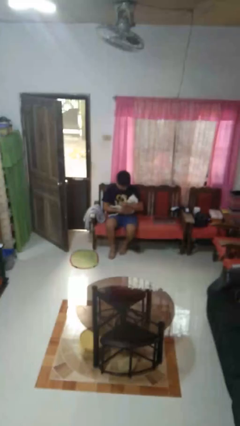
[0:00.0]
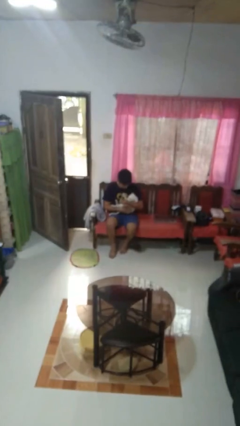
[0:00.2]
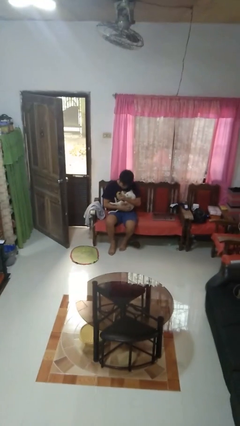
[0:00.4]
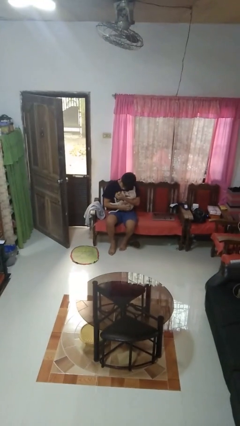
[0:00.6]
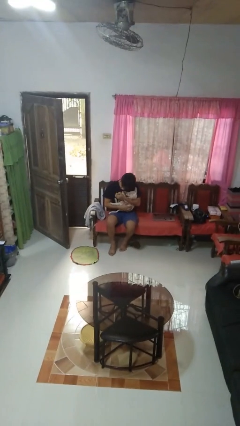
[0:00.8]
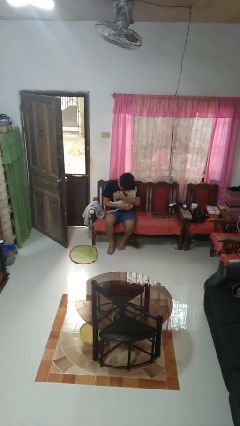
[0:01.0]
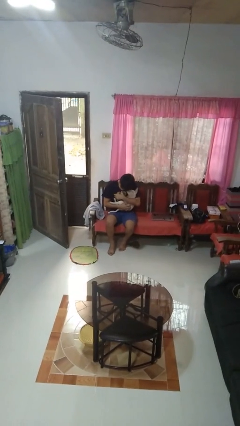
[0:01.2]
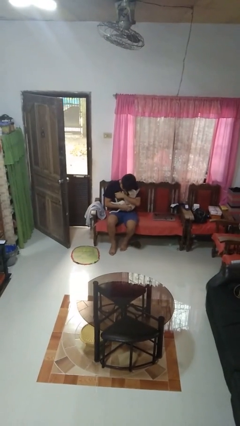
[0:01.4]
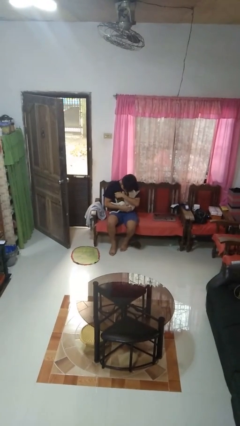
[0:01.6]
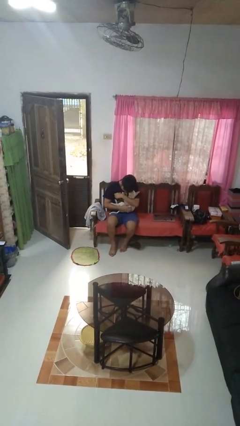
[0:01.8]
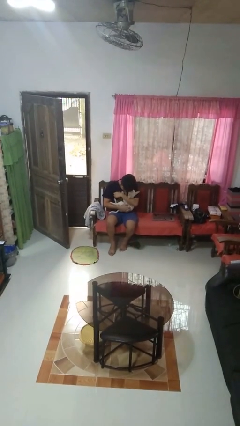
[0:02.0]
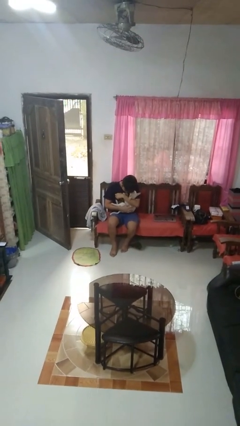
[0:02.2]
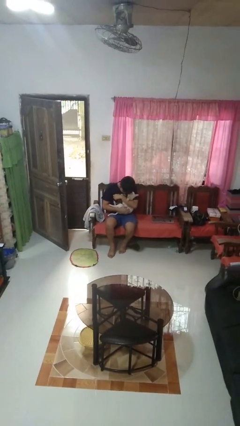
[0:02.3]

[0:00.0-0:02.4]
person hugs dog

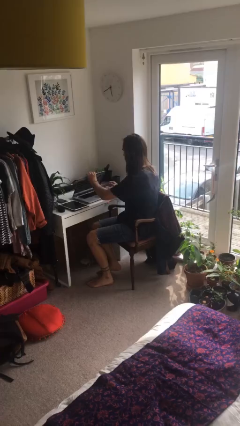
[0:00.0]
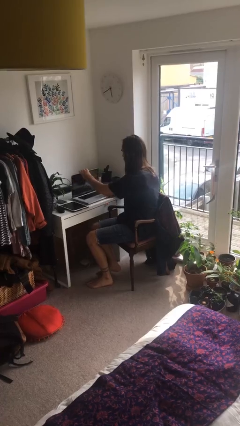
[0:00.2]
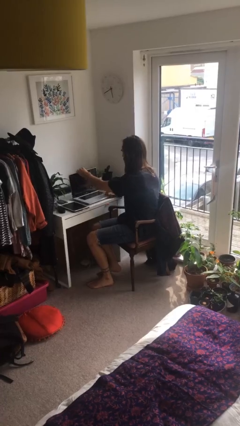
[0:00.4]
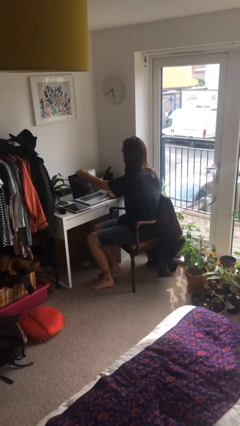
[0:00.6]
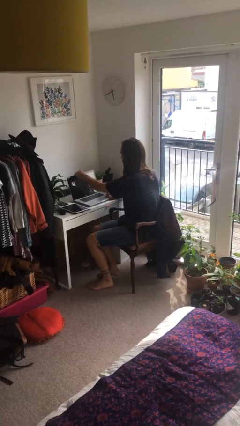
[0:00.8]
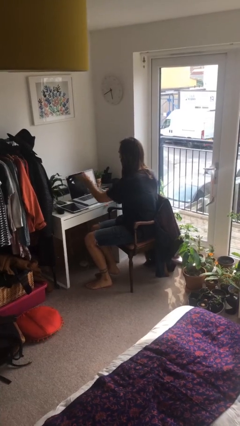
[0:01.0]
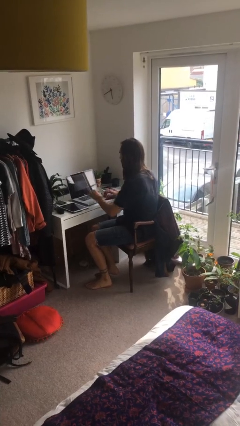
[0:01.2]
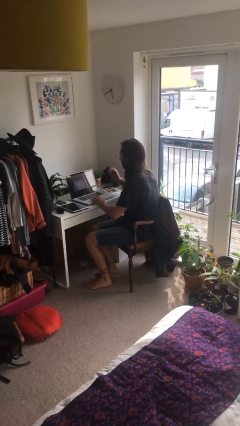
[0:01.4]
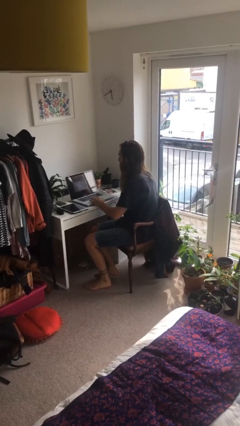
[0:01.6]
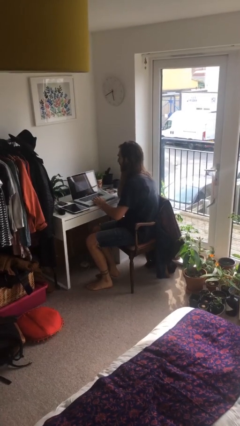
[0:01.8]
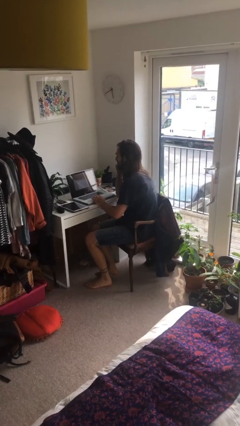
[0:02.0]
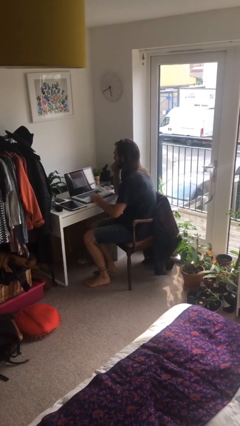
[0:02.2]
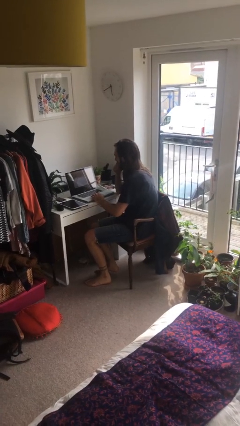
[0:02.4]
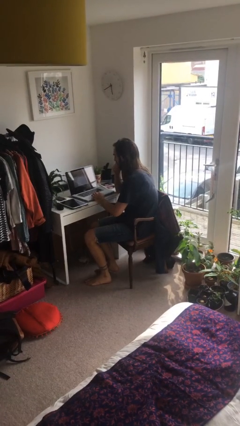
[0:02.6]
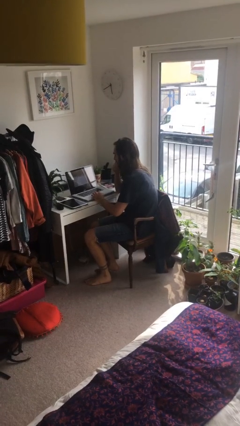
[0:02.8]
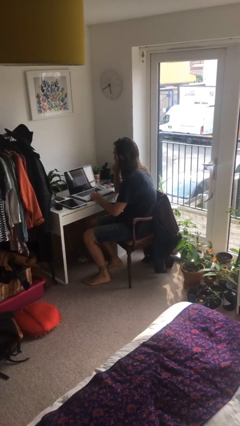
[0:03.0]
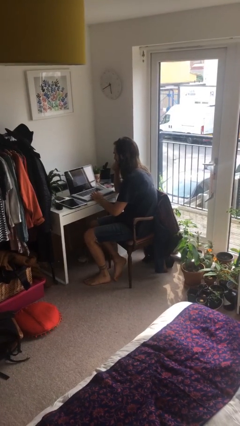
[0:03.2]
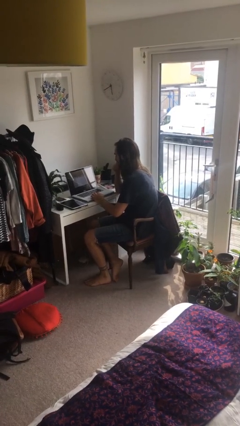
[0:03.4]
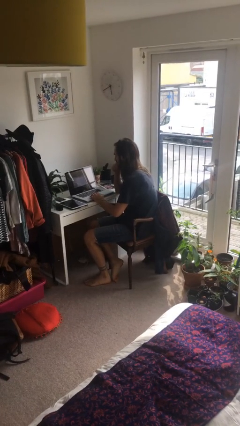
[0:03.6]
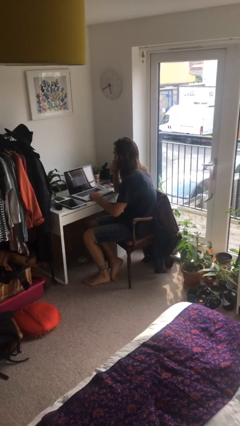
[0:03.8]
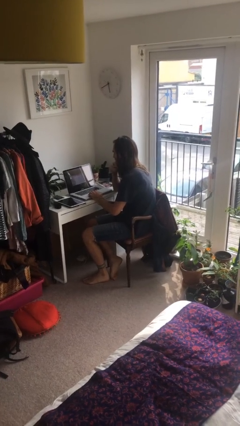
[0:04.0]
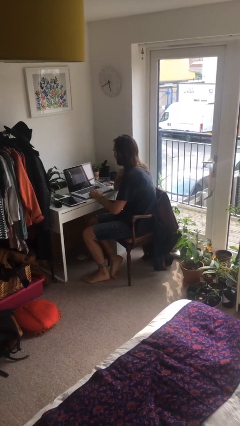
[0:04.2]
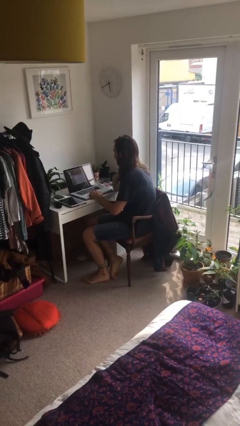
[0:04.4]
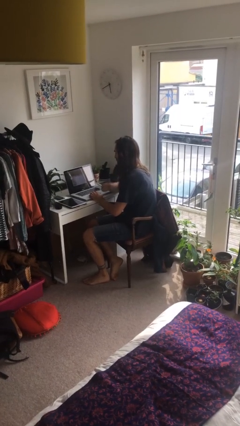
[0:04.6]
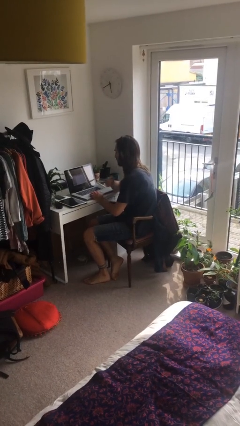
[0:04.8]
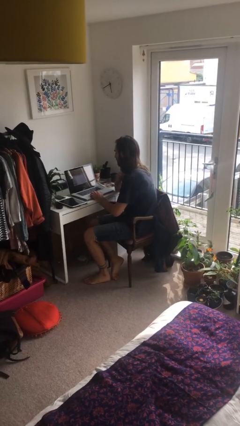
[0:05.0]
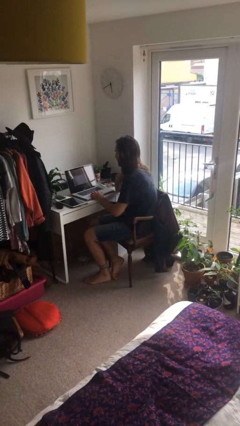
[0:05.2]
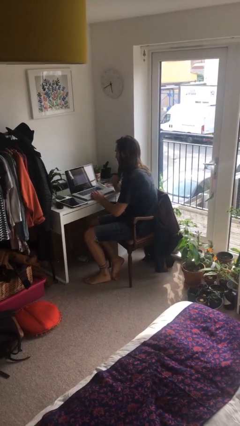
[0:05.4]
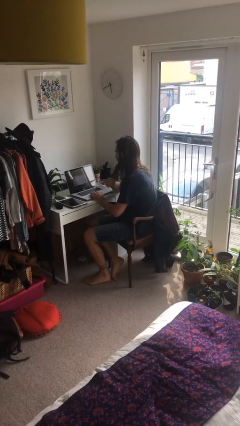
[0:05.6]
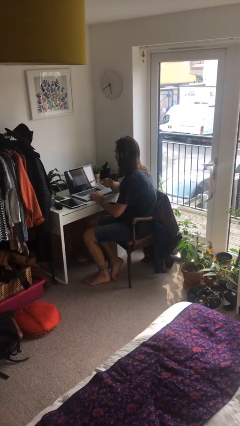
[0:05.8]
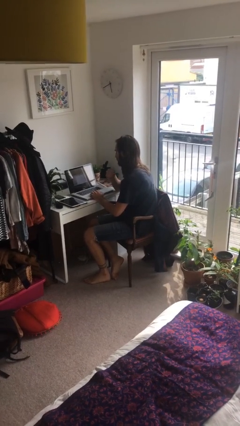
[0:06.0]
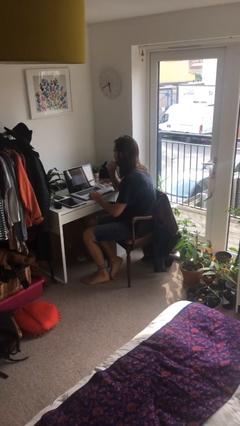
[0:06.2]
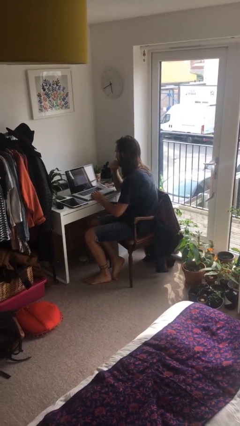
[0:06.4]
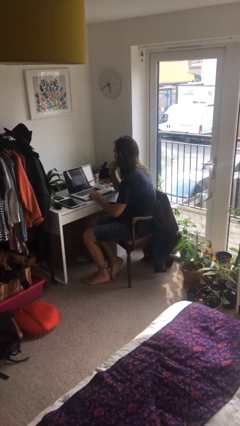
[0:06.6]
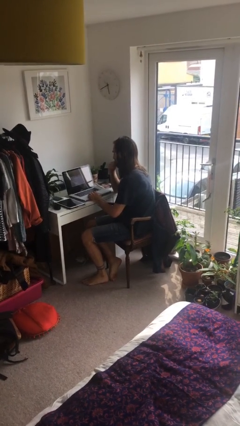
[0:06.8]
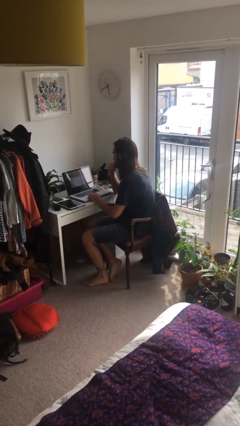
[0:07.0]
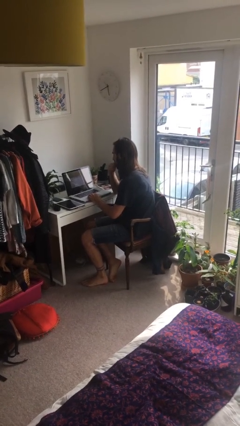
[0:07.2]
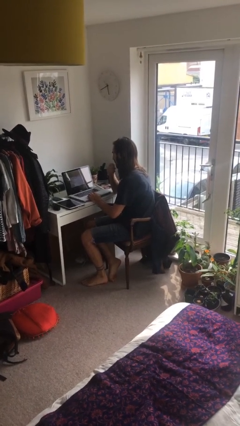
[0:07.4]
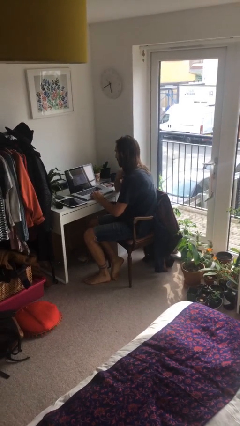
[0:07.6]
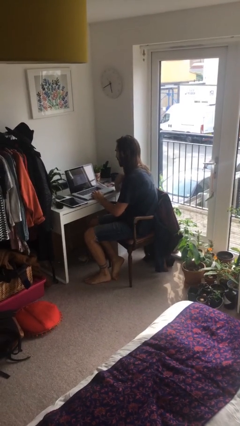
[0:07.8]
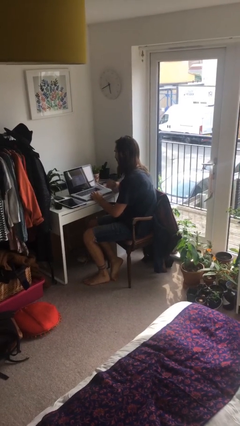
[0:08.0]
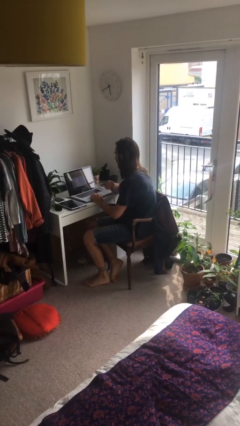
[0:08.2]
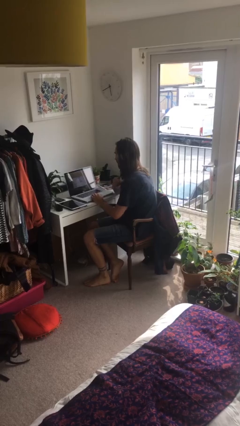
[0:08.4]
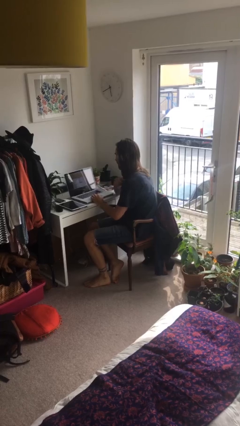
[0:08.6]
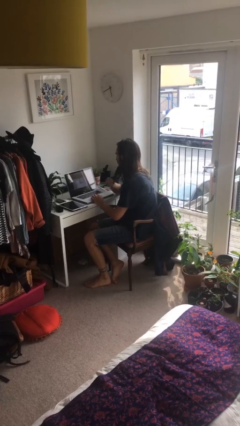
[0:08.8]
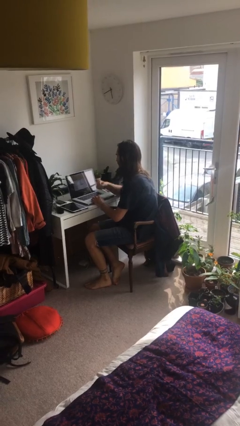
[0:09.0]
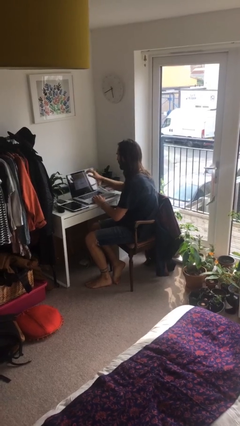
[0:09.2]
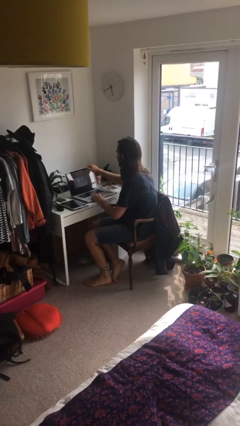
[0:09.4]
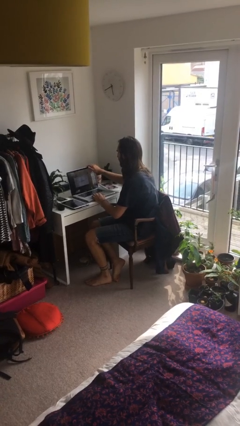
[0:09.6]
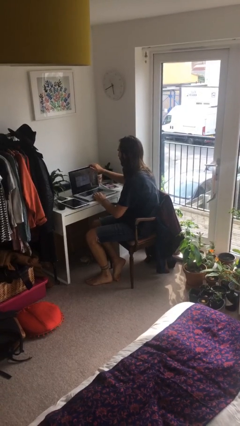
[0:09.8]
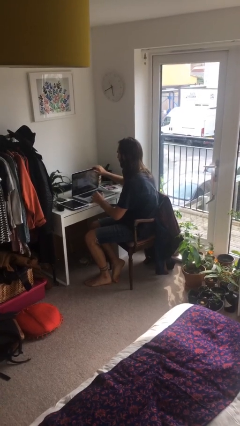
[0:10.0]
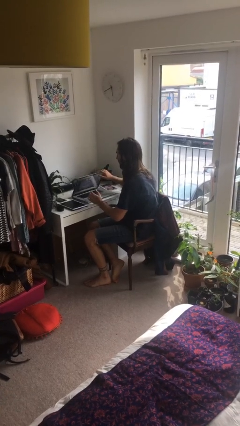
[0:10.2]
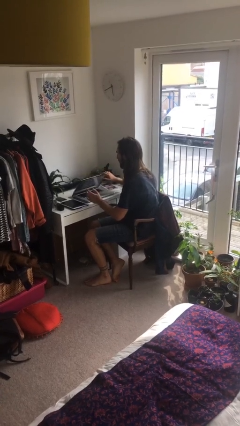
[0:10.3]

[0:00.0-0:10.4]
person interacts with laptop

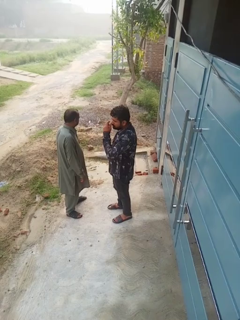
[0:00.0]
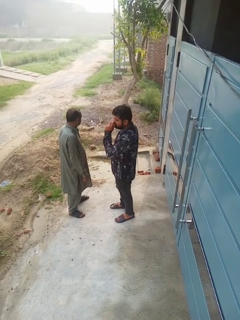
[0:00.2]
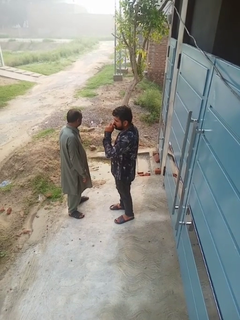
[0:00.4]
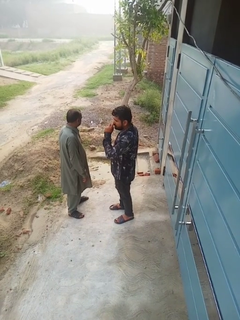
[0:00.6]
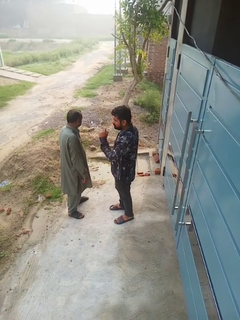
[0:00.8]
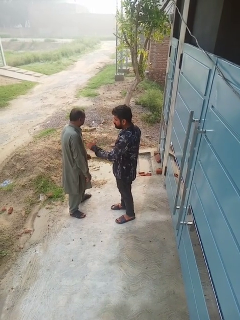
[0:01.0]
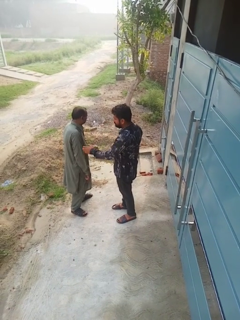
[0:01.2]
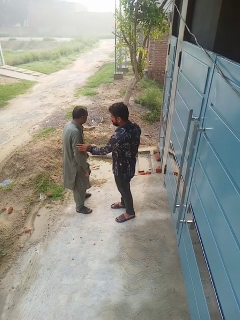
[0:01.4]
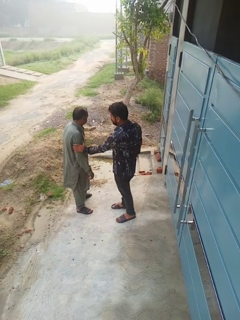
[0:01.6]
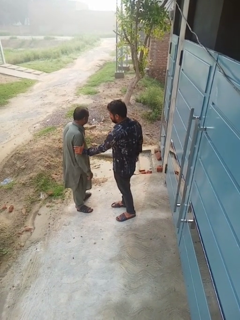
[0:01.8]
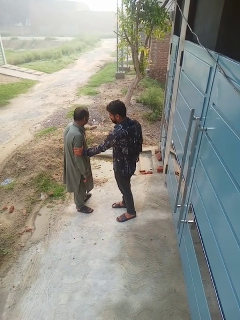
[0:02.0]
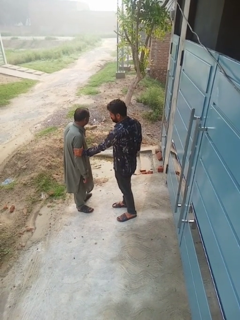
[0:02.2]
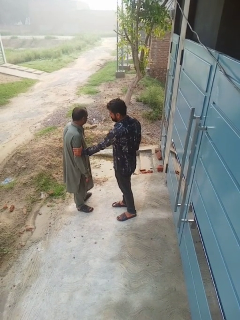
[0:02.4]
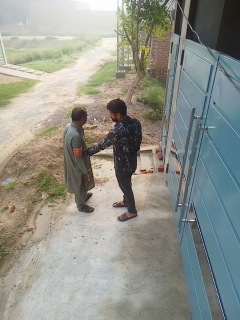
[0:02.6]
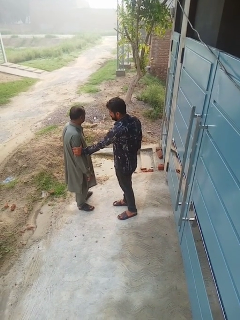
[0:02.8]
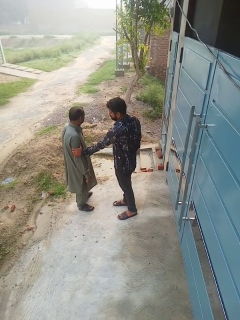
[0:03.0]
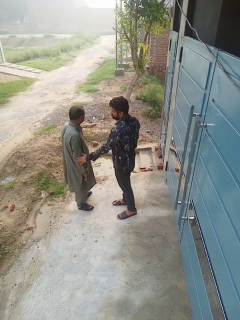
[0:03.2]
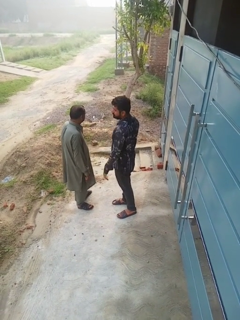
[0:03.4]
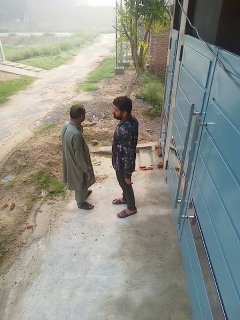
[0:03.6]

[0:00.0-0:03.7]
person grabs person by bicep

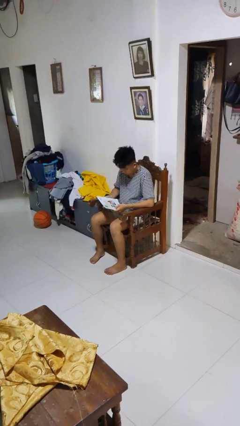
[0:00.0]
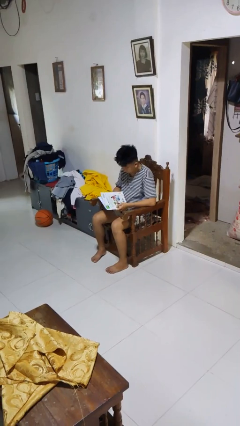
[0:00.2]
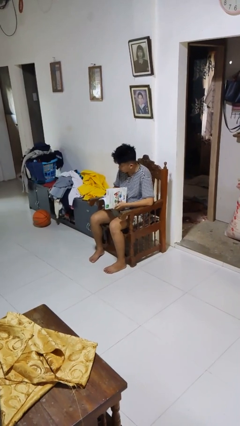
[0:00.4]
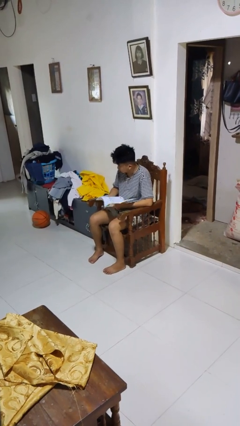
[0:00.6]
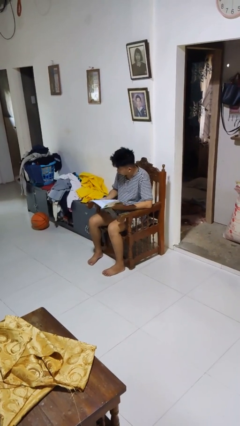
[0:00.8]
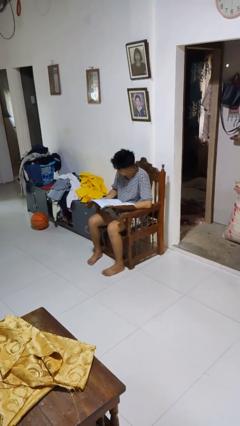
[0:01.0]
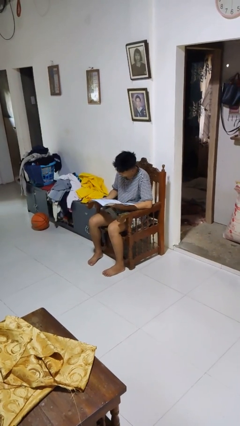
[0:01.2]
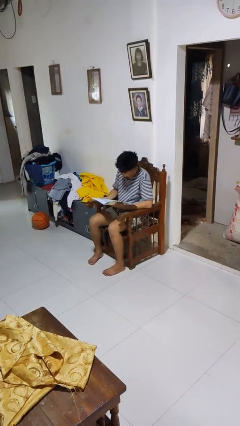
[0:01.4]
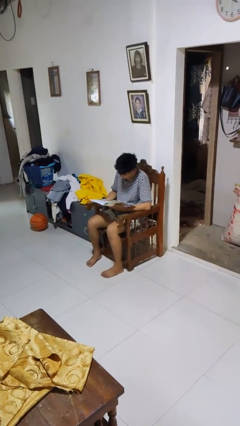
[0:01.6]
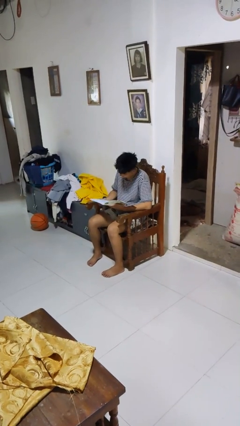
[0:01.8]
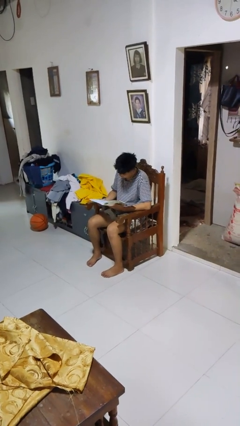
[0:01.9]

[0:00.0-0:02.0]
person reads magazine

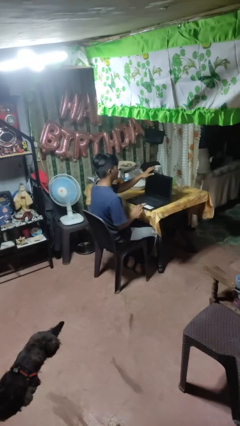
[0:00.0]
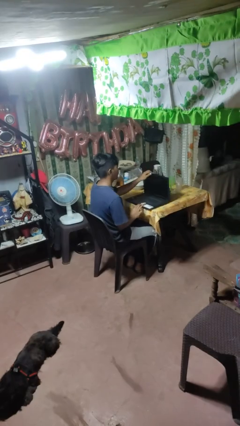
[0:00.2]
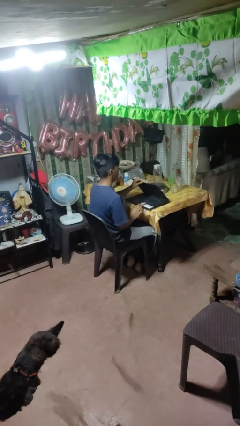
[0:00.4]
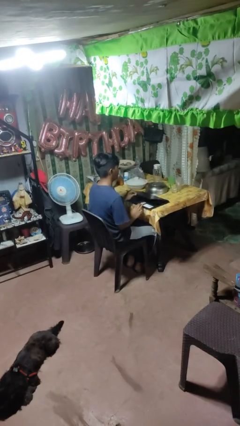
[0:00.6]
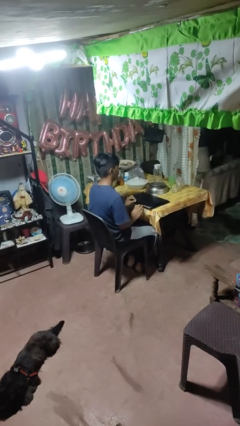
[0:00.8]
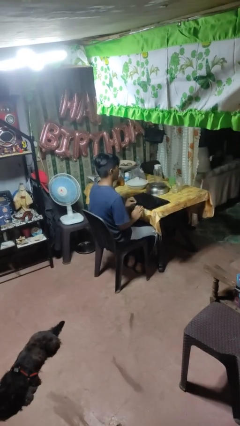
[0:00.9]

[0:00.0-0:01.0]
person closes laptop
